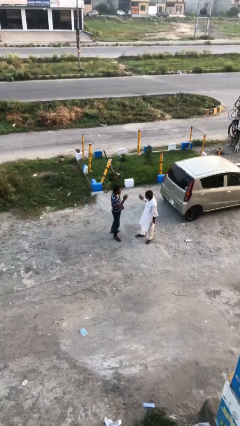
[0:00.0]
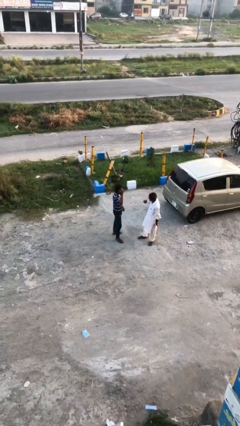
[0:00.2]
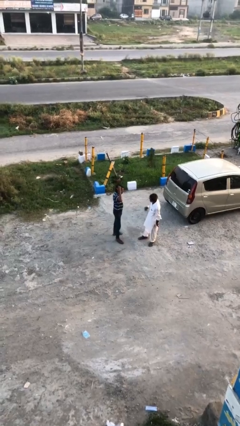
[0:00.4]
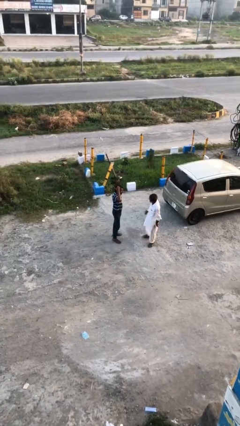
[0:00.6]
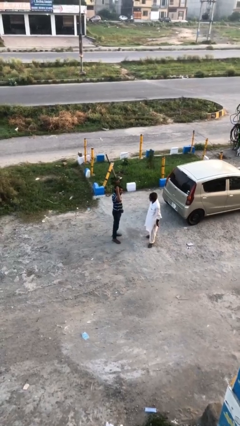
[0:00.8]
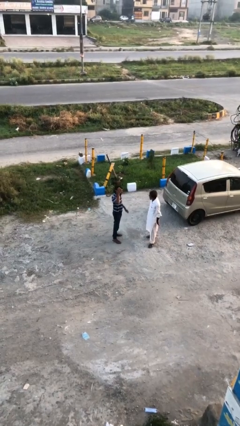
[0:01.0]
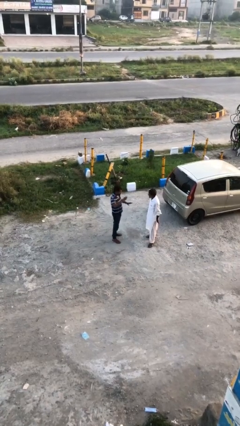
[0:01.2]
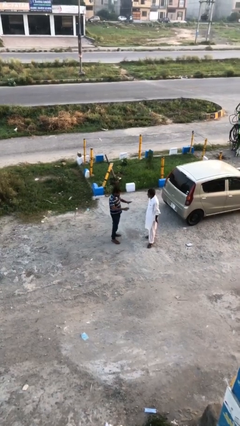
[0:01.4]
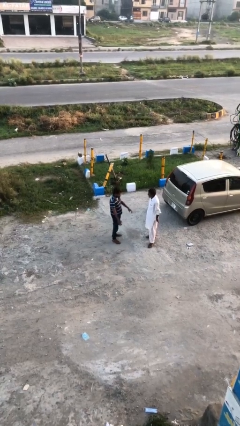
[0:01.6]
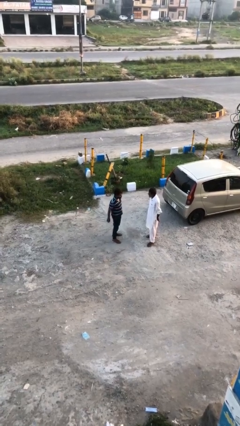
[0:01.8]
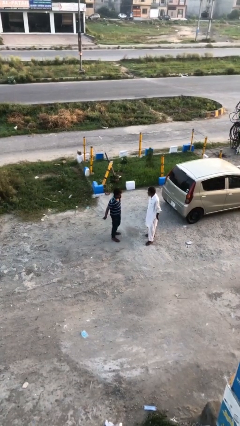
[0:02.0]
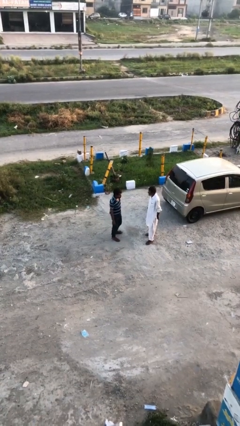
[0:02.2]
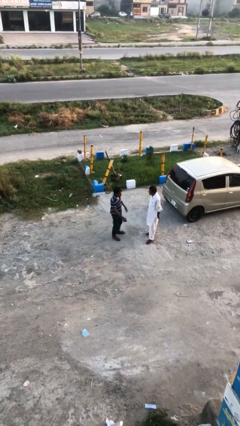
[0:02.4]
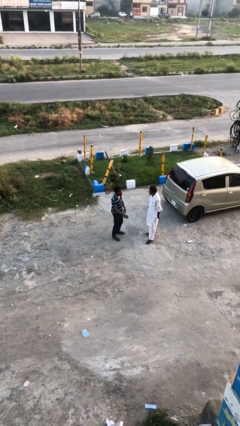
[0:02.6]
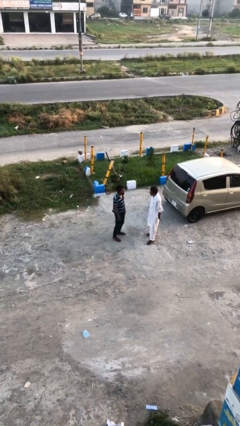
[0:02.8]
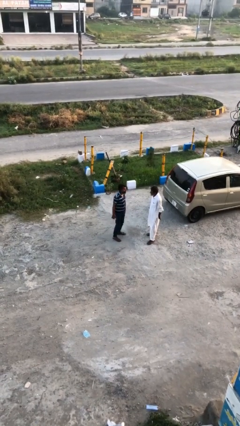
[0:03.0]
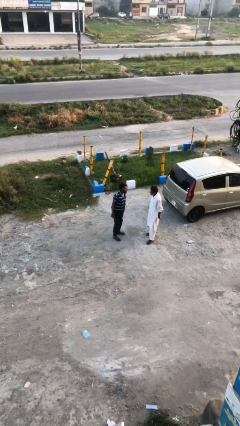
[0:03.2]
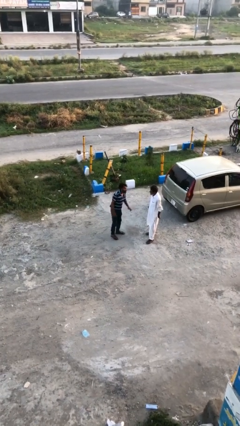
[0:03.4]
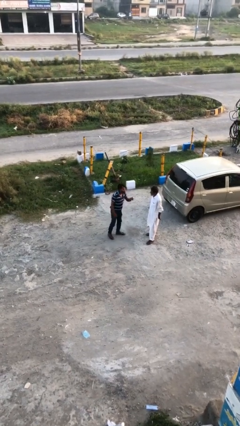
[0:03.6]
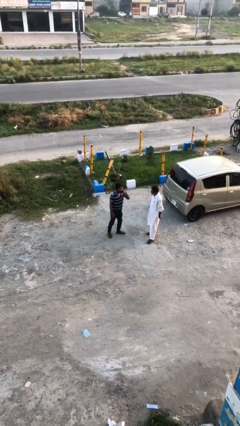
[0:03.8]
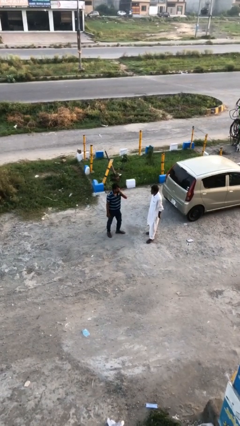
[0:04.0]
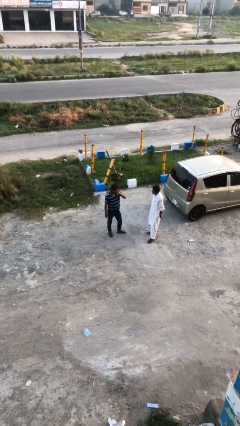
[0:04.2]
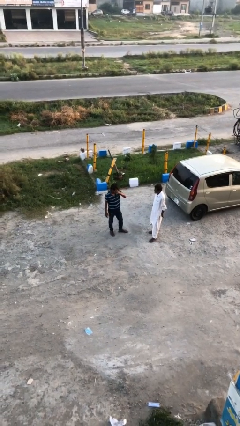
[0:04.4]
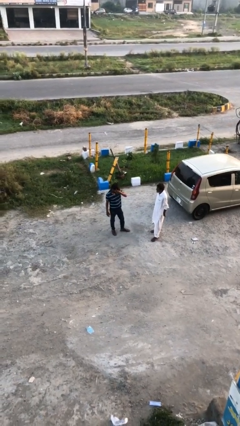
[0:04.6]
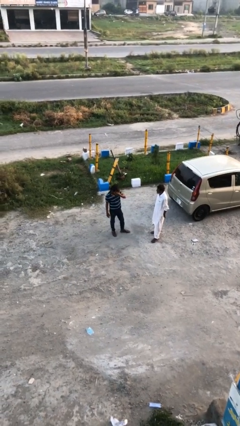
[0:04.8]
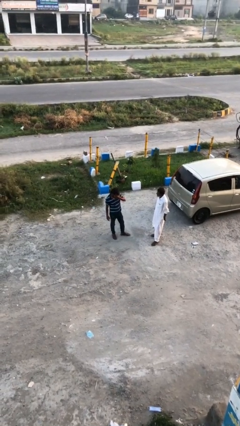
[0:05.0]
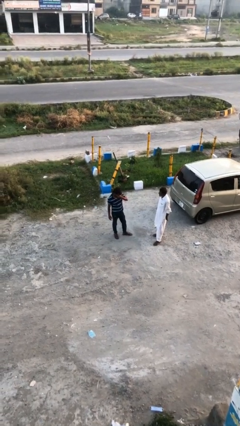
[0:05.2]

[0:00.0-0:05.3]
person talks to person

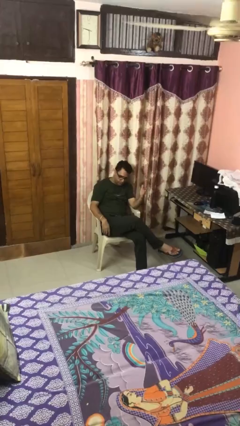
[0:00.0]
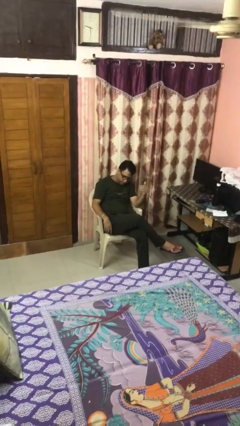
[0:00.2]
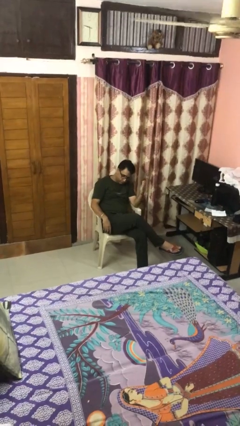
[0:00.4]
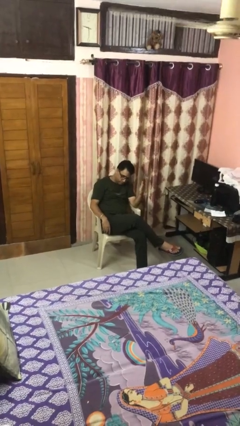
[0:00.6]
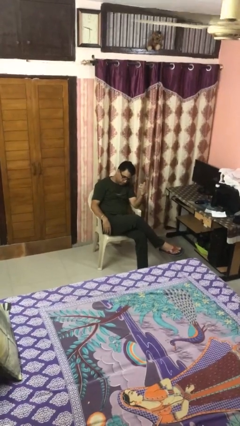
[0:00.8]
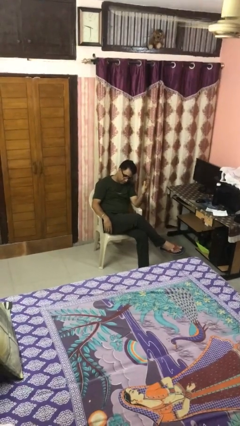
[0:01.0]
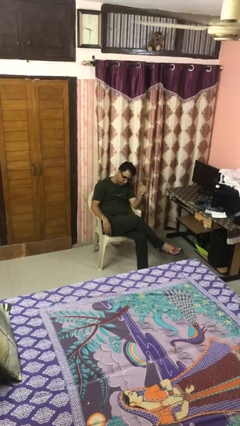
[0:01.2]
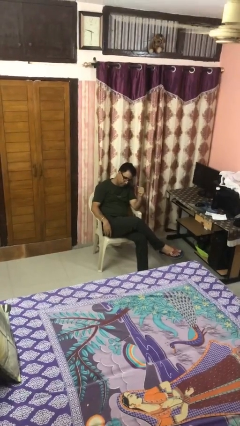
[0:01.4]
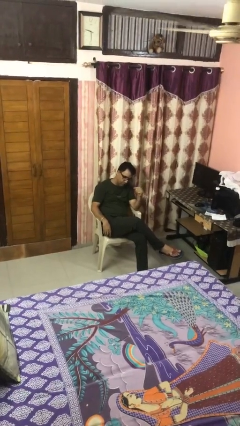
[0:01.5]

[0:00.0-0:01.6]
person gestures come here

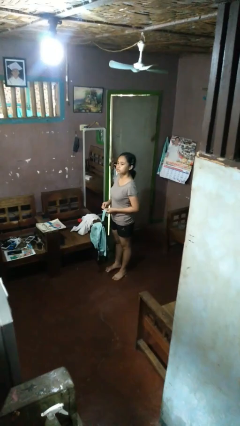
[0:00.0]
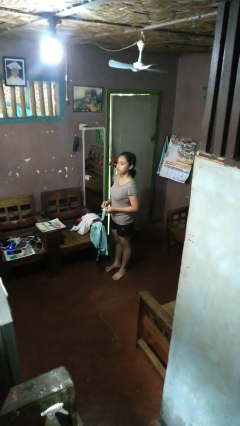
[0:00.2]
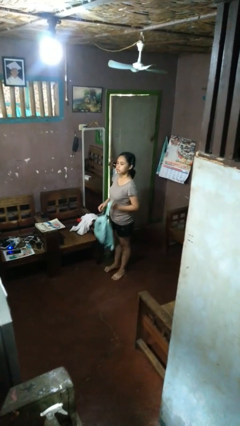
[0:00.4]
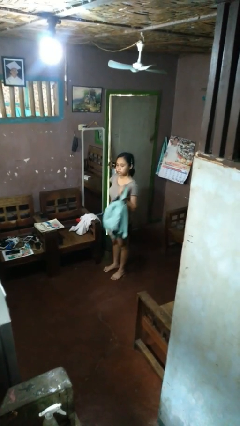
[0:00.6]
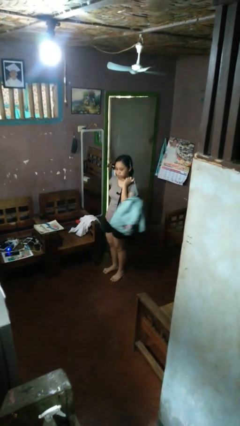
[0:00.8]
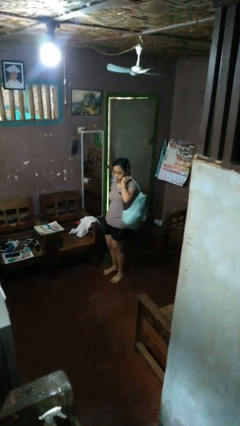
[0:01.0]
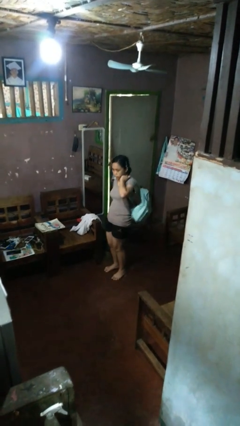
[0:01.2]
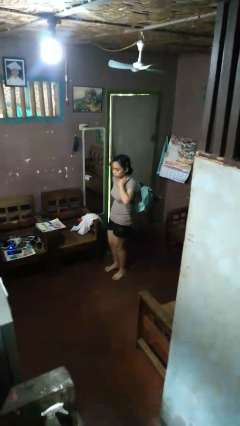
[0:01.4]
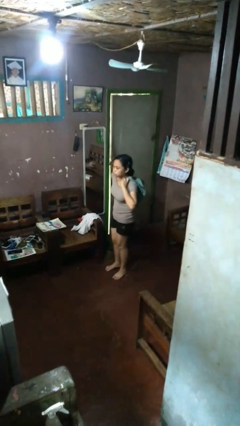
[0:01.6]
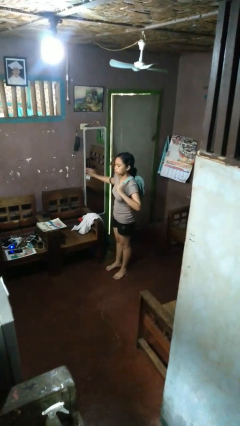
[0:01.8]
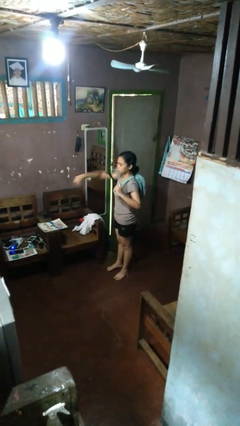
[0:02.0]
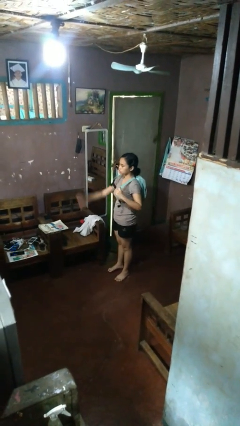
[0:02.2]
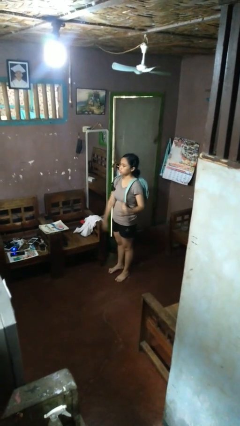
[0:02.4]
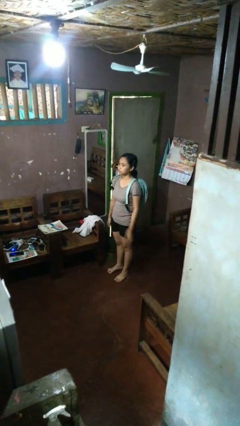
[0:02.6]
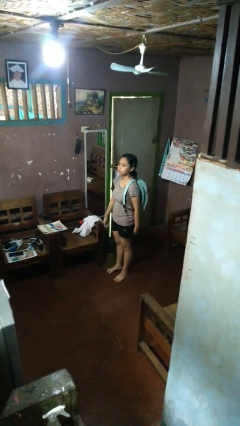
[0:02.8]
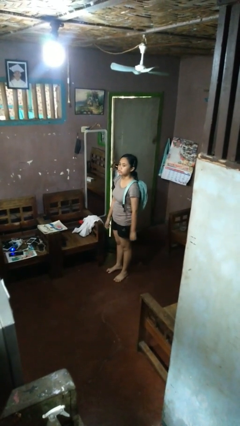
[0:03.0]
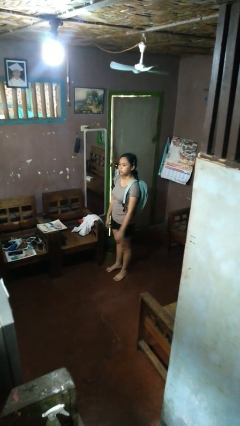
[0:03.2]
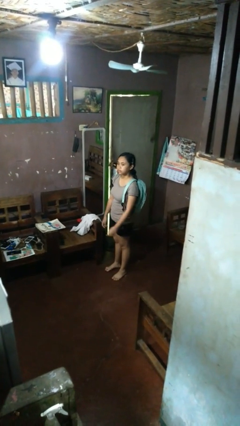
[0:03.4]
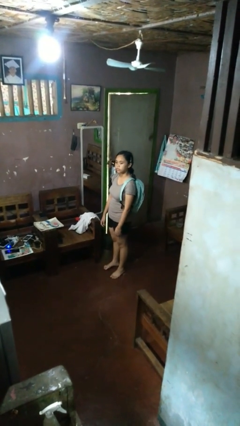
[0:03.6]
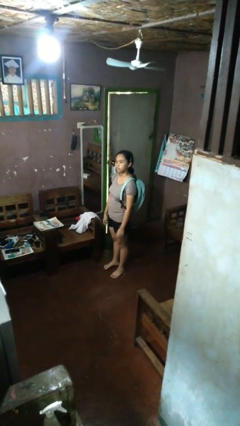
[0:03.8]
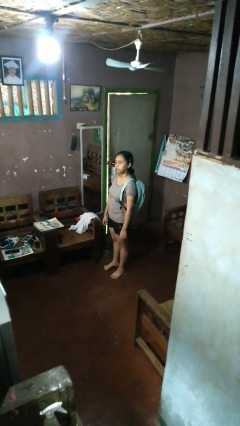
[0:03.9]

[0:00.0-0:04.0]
person puts on backpack

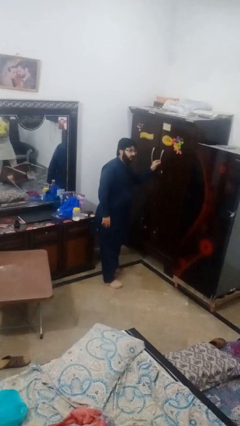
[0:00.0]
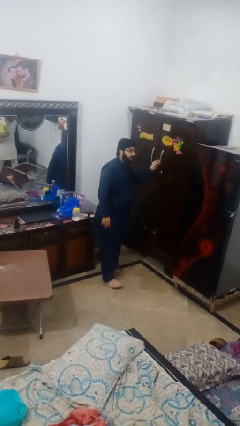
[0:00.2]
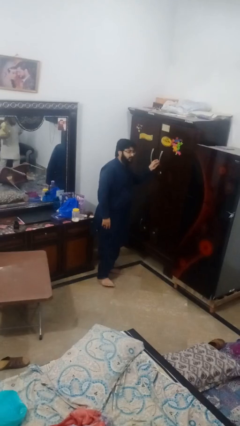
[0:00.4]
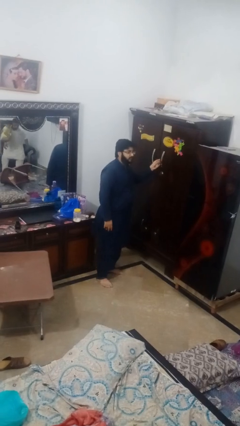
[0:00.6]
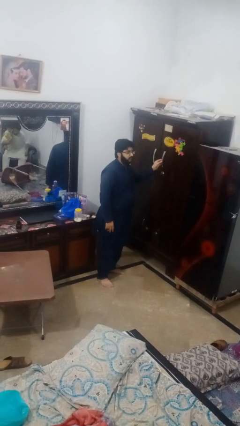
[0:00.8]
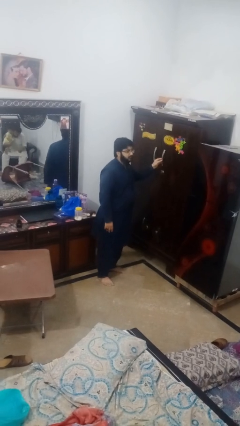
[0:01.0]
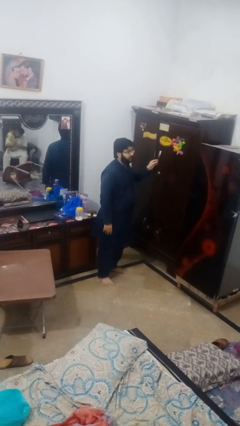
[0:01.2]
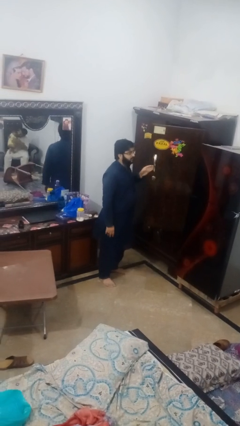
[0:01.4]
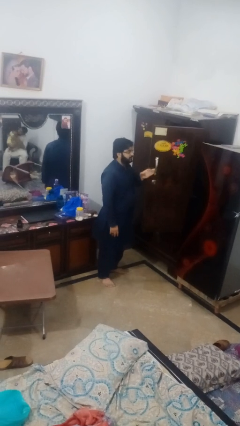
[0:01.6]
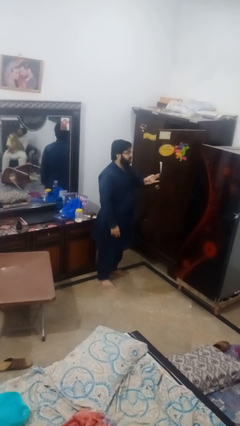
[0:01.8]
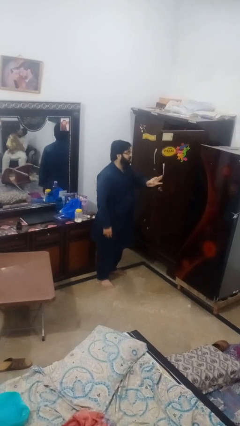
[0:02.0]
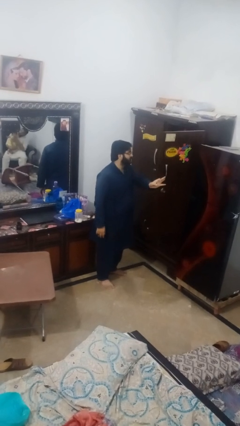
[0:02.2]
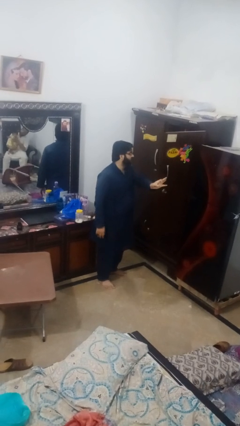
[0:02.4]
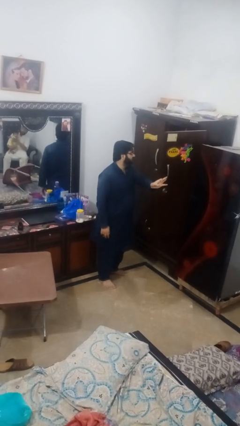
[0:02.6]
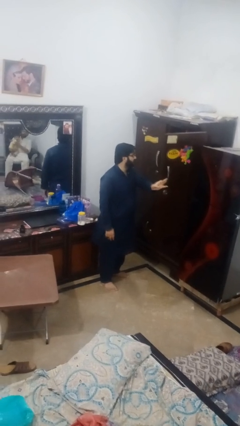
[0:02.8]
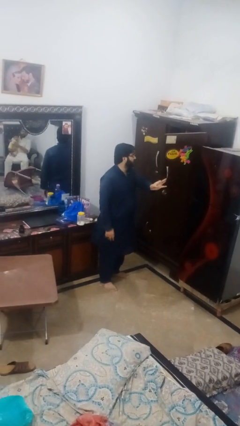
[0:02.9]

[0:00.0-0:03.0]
person opens closet door

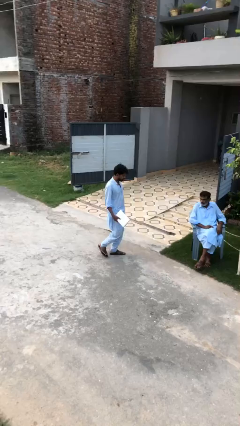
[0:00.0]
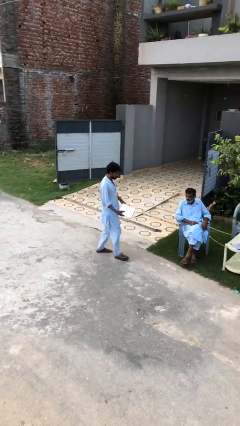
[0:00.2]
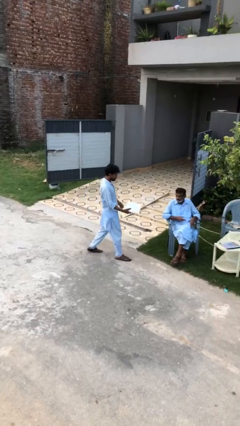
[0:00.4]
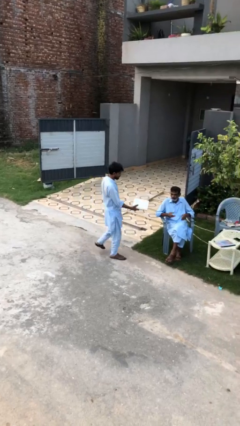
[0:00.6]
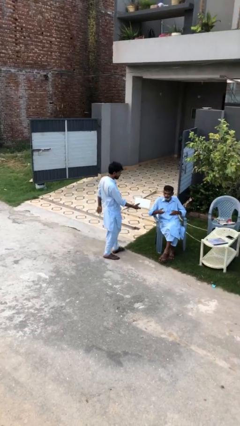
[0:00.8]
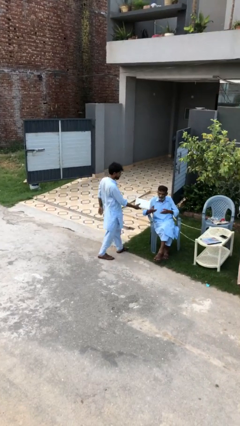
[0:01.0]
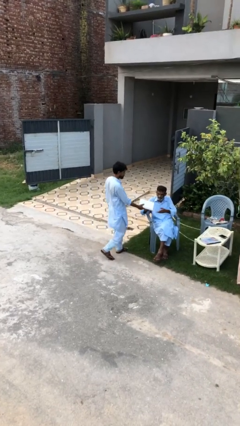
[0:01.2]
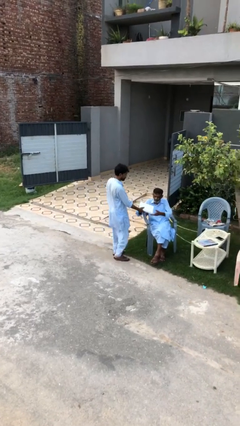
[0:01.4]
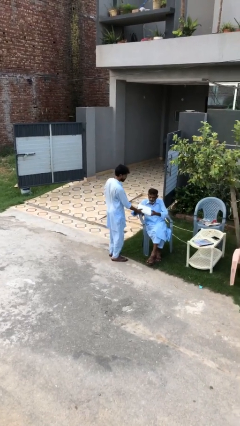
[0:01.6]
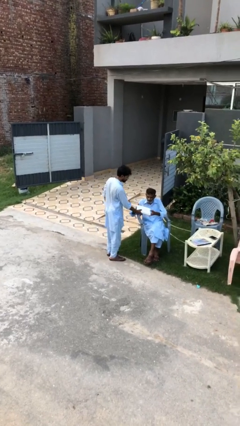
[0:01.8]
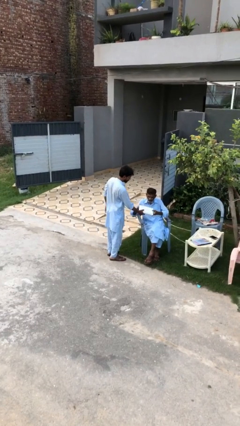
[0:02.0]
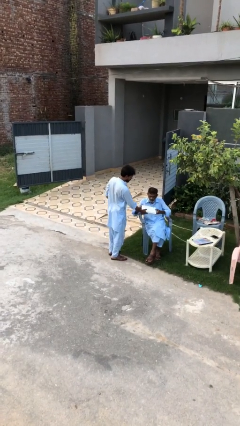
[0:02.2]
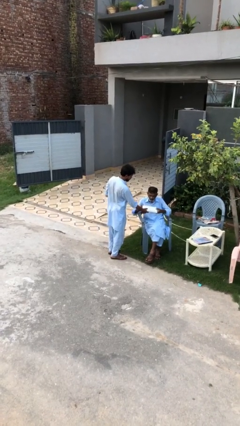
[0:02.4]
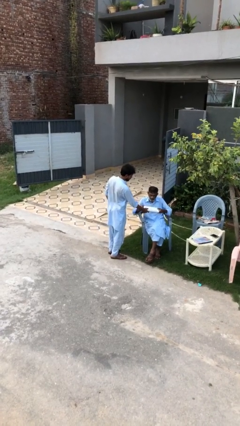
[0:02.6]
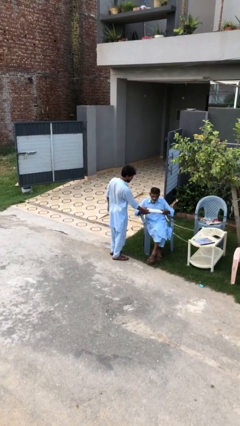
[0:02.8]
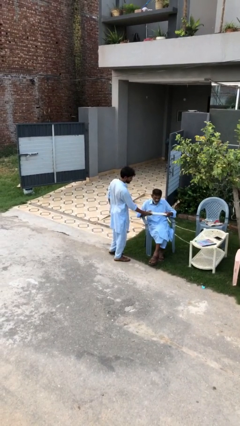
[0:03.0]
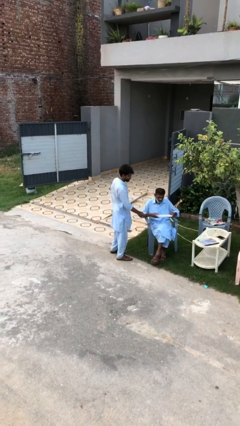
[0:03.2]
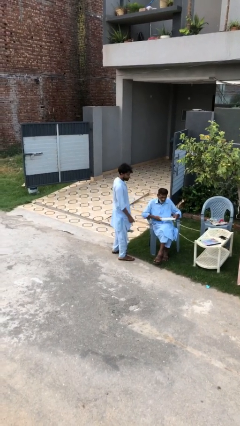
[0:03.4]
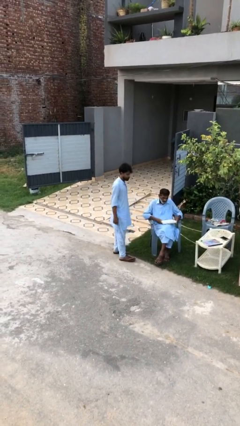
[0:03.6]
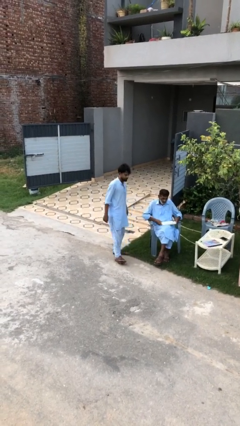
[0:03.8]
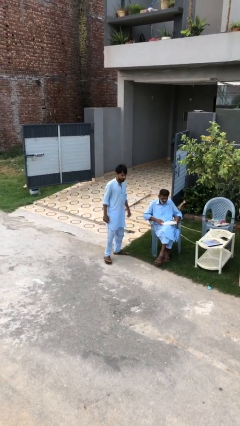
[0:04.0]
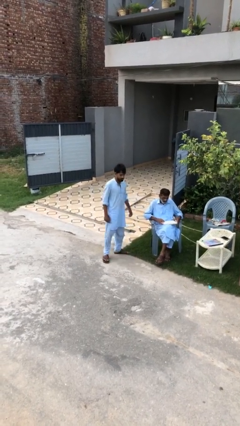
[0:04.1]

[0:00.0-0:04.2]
person transfers object to person
